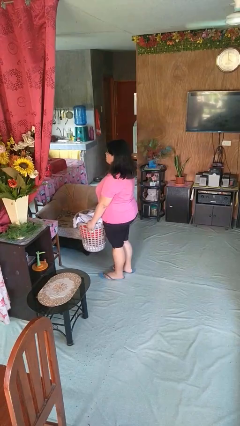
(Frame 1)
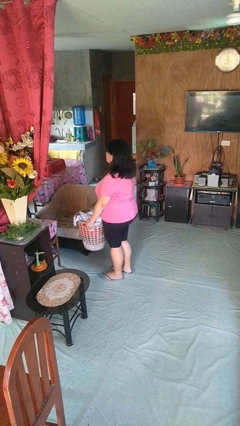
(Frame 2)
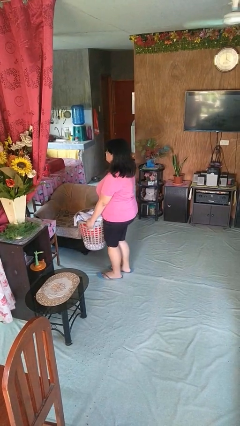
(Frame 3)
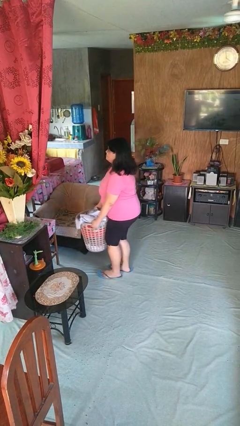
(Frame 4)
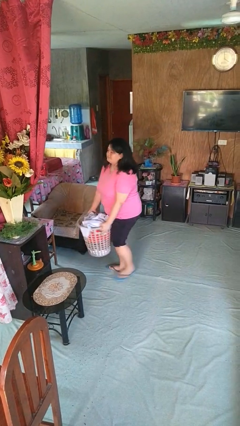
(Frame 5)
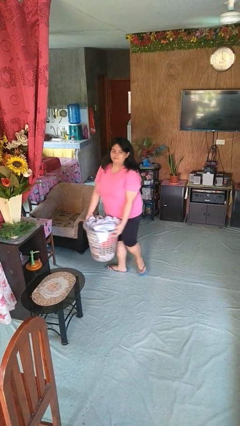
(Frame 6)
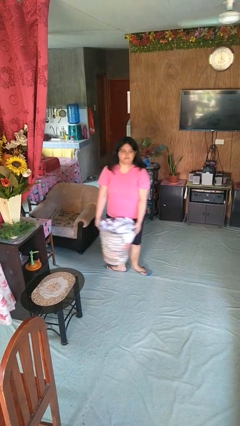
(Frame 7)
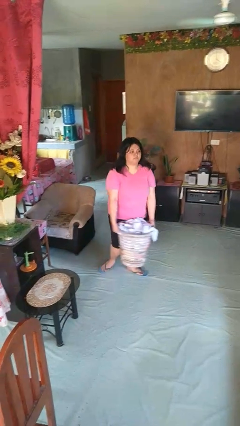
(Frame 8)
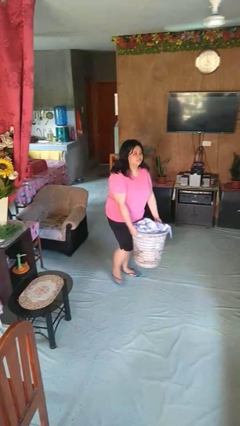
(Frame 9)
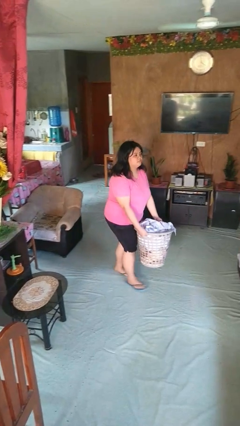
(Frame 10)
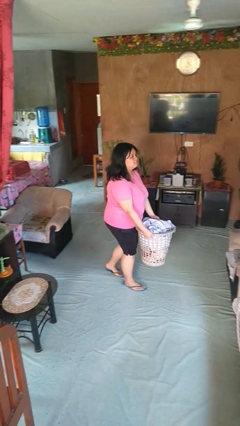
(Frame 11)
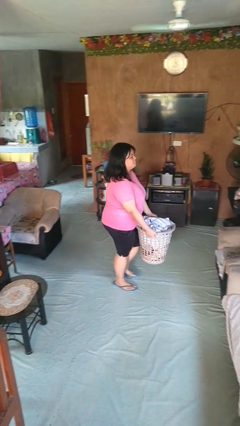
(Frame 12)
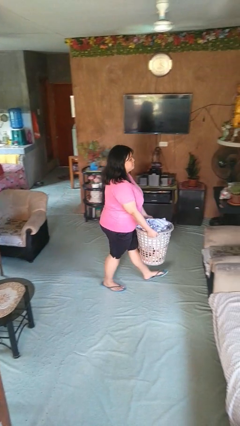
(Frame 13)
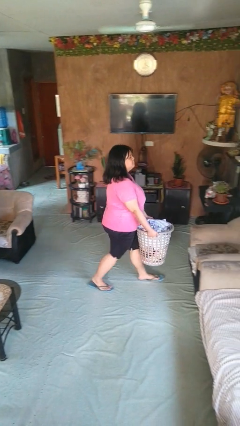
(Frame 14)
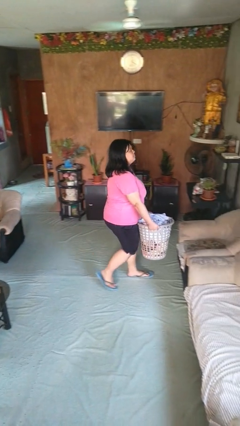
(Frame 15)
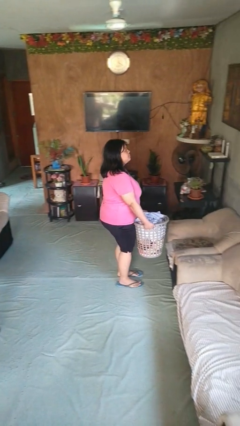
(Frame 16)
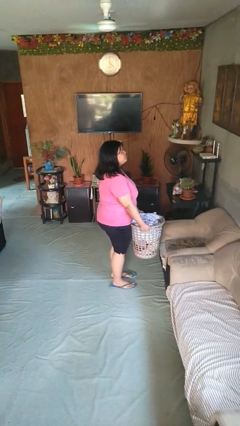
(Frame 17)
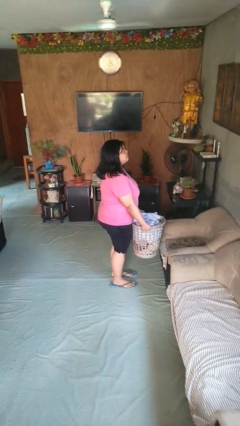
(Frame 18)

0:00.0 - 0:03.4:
person carries laundry basket

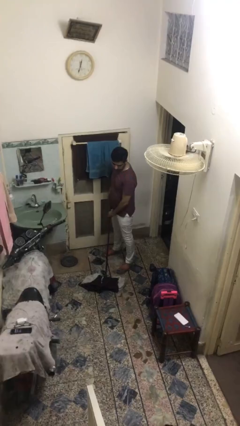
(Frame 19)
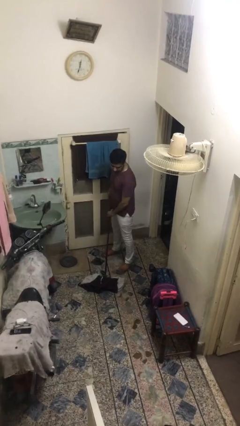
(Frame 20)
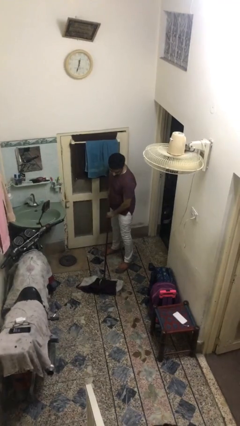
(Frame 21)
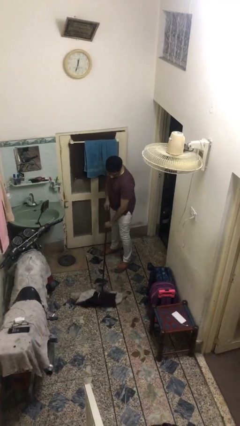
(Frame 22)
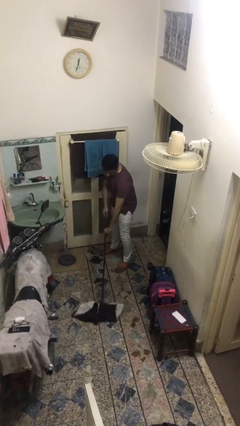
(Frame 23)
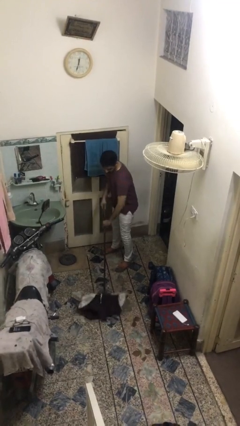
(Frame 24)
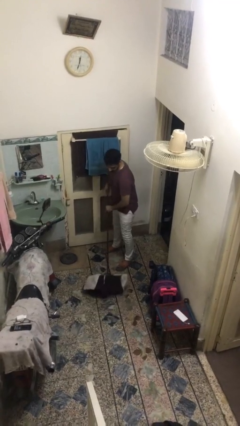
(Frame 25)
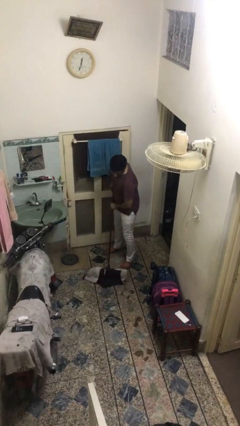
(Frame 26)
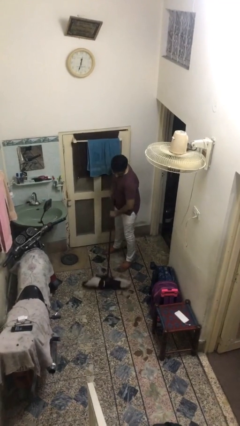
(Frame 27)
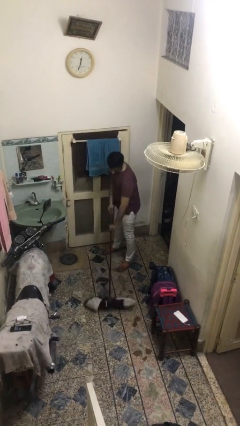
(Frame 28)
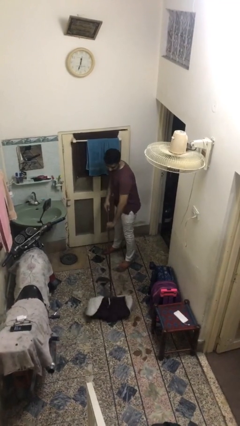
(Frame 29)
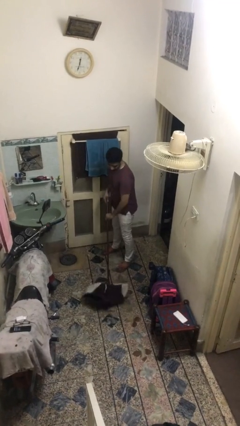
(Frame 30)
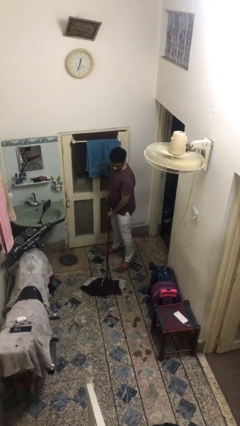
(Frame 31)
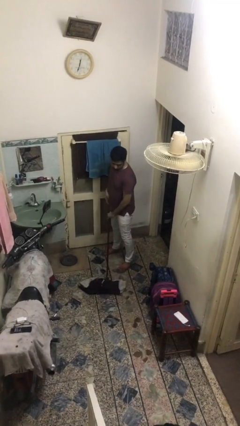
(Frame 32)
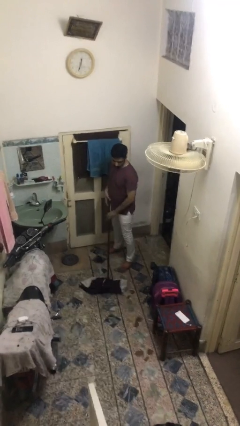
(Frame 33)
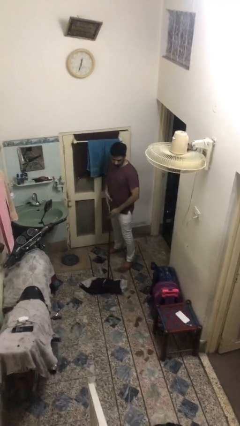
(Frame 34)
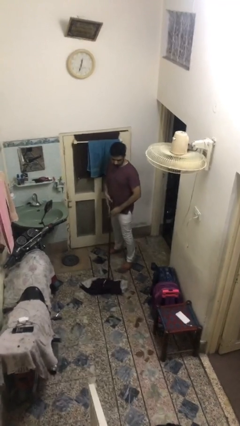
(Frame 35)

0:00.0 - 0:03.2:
person sweeps floor

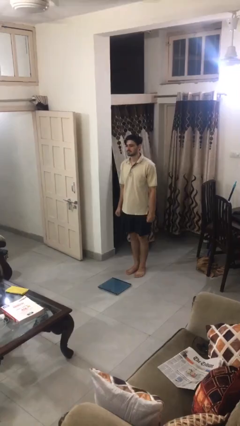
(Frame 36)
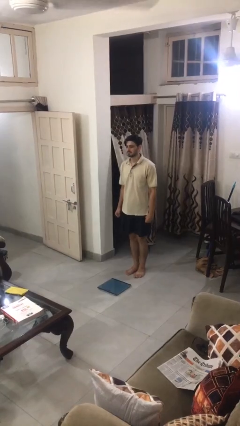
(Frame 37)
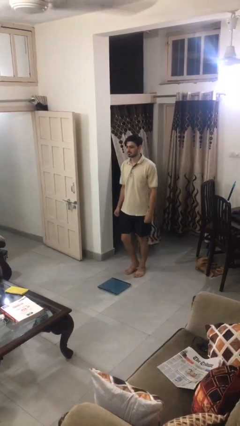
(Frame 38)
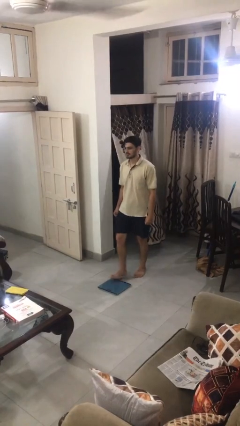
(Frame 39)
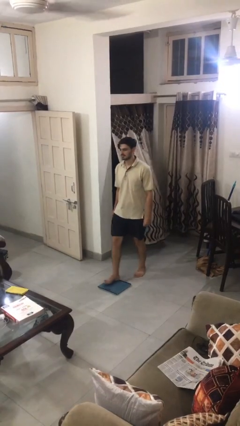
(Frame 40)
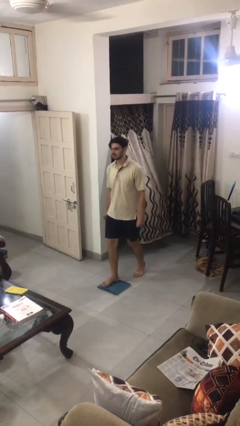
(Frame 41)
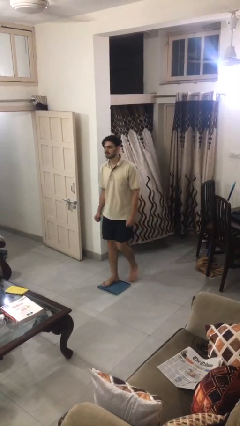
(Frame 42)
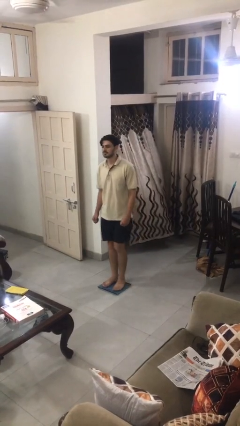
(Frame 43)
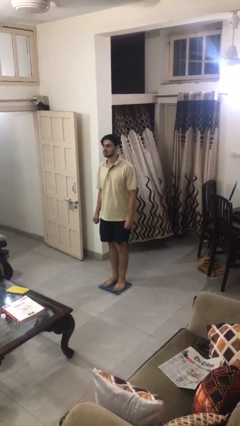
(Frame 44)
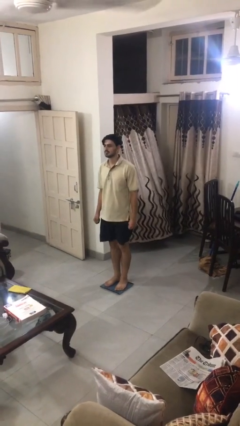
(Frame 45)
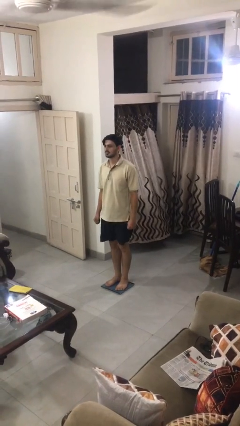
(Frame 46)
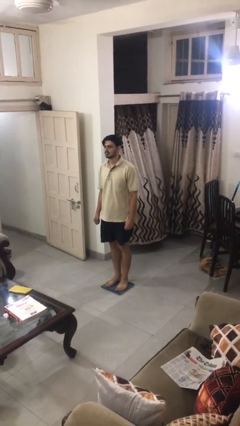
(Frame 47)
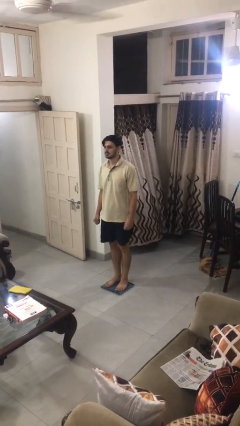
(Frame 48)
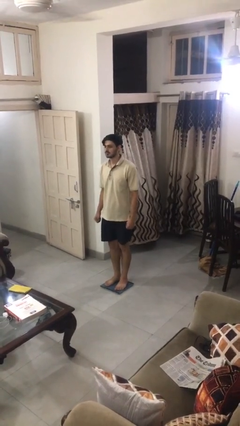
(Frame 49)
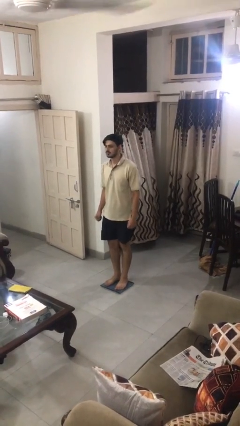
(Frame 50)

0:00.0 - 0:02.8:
person uses bodyweight scale

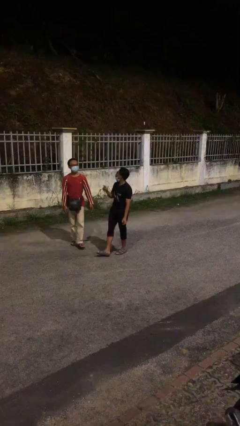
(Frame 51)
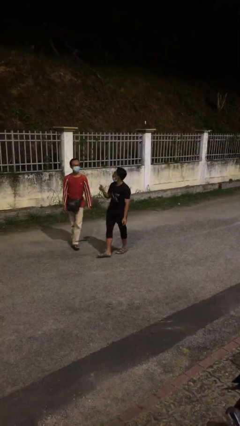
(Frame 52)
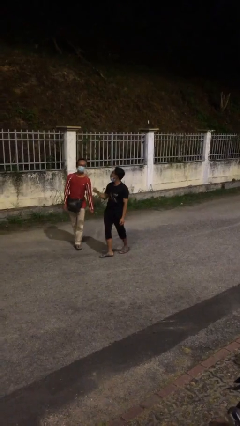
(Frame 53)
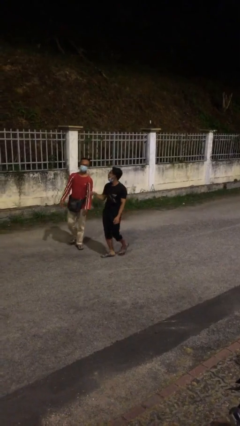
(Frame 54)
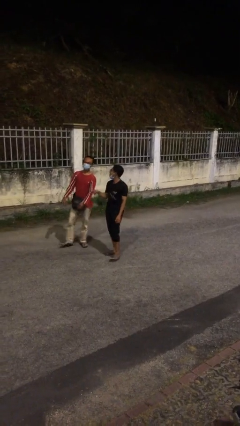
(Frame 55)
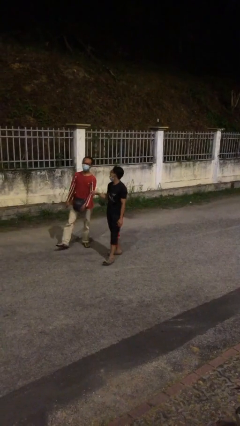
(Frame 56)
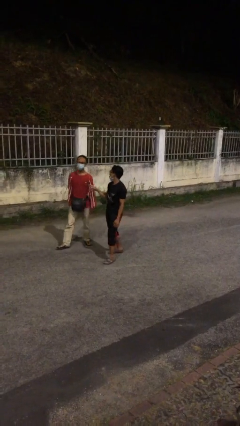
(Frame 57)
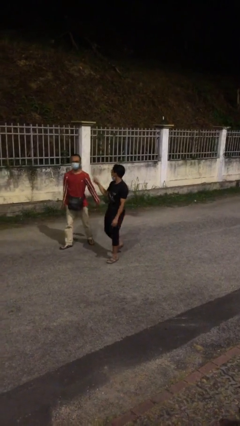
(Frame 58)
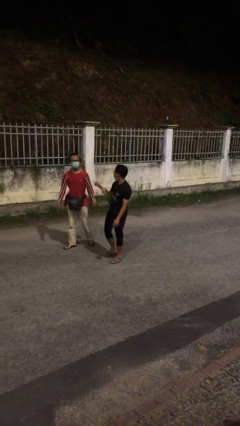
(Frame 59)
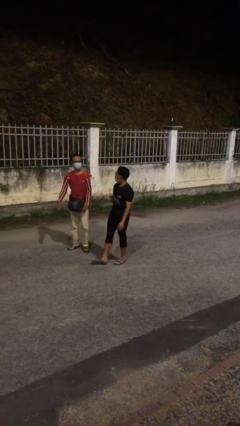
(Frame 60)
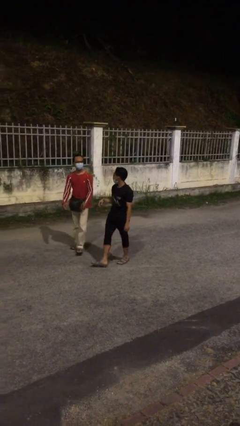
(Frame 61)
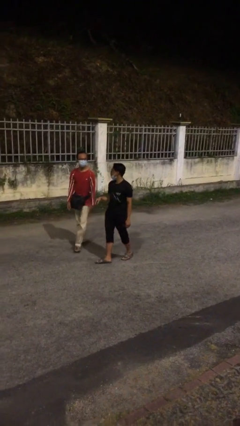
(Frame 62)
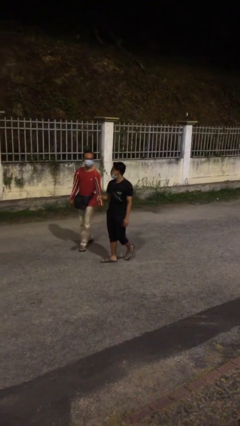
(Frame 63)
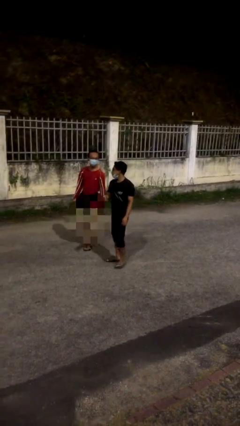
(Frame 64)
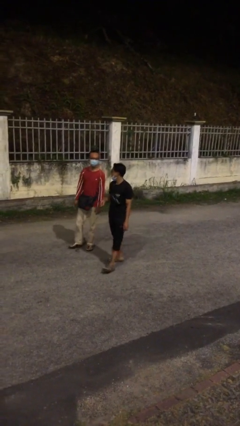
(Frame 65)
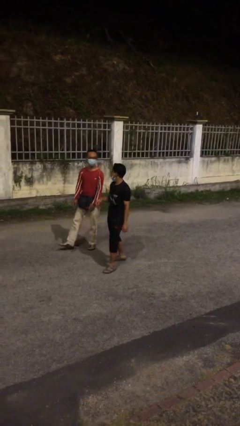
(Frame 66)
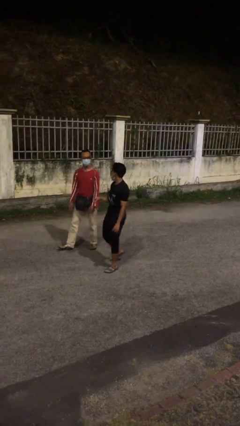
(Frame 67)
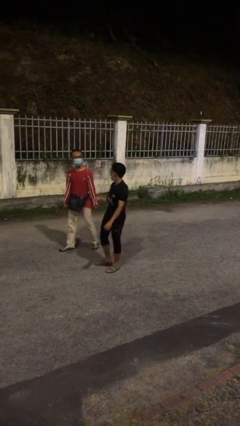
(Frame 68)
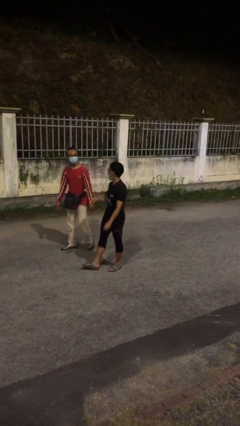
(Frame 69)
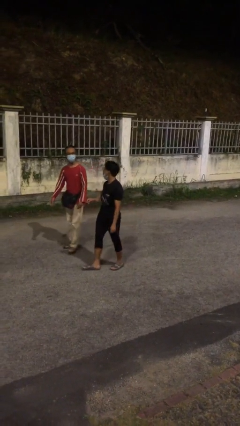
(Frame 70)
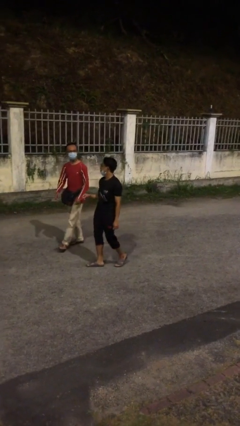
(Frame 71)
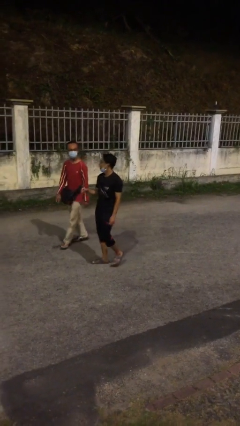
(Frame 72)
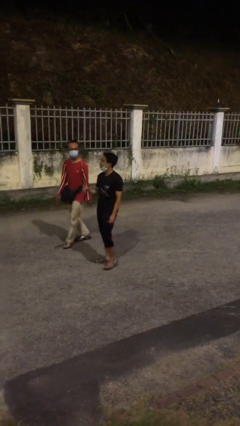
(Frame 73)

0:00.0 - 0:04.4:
person talks to person

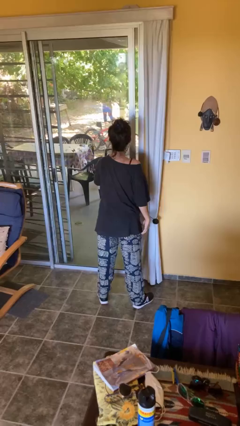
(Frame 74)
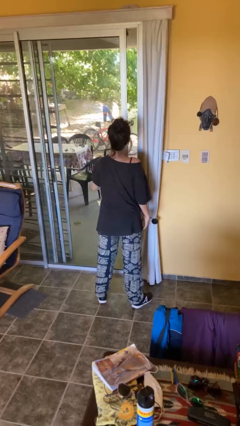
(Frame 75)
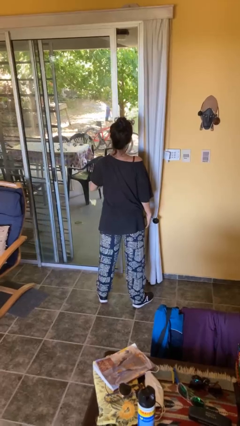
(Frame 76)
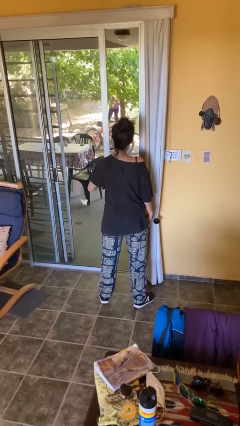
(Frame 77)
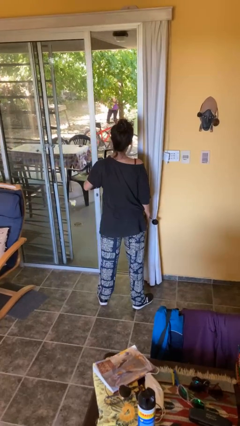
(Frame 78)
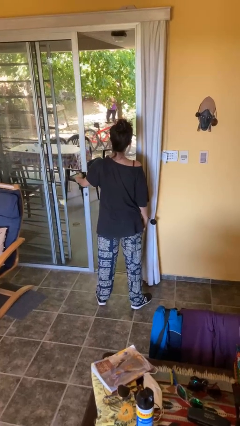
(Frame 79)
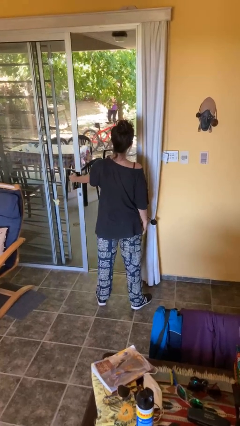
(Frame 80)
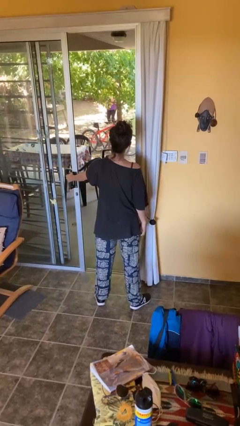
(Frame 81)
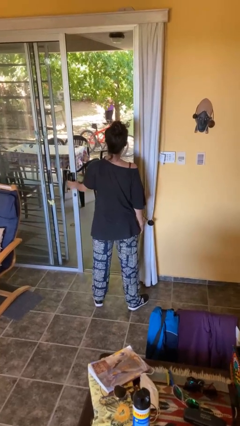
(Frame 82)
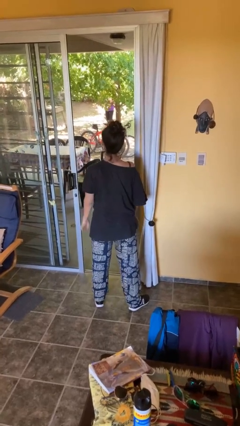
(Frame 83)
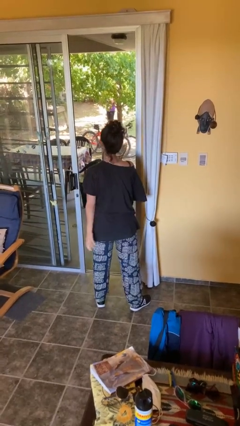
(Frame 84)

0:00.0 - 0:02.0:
person opens facility door

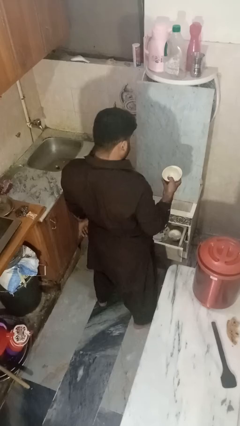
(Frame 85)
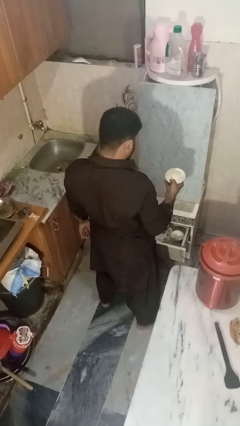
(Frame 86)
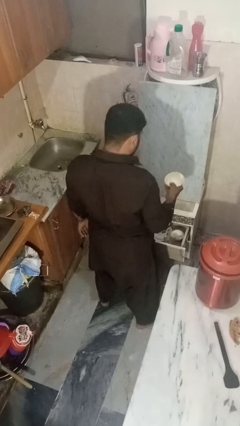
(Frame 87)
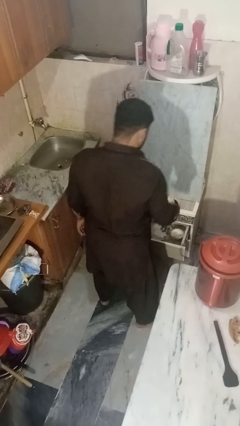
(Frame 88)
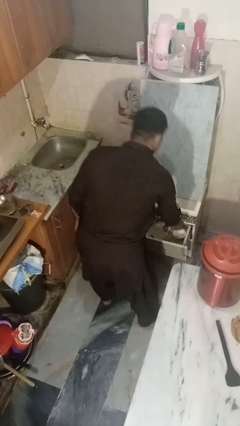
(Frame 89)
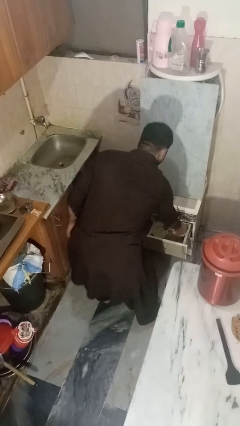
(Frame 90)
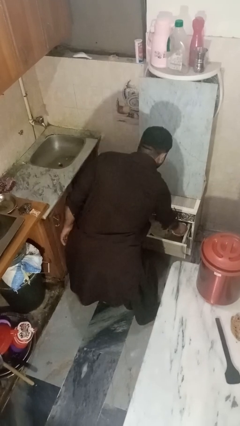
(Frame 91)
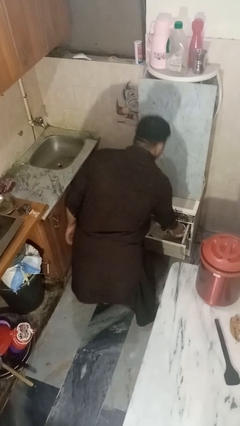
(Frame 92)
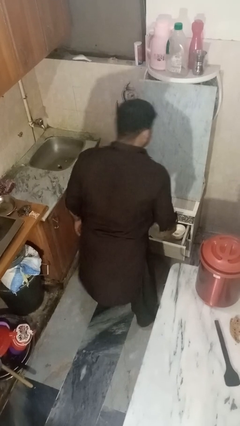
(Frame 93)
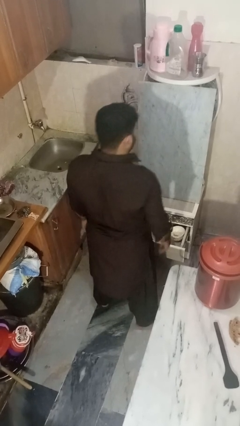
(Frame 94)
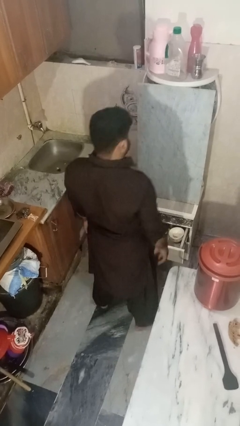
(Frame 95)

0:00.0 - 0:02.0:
person puts object into kitchen drawer
